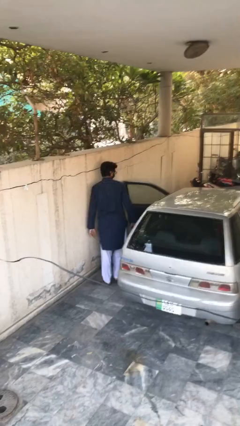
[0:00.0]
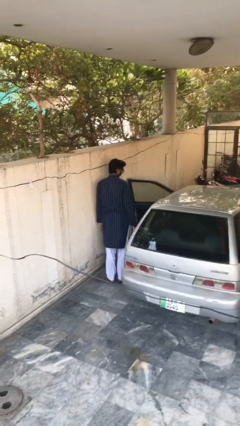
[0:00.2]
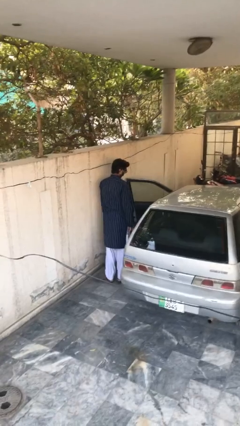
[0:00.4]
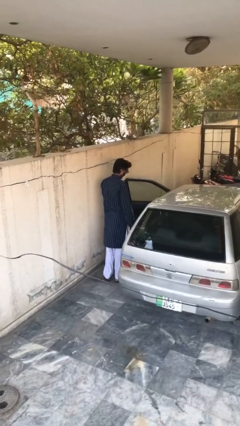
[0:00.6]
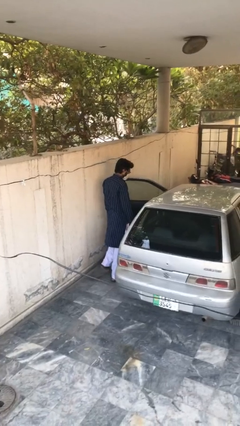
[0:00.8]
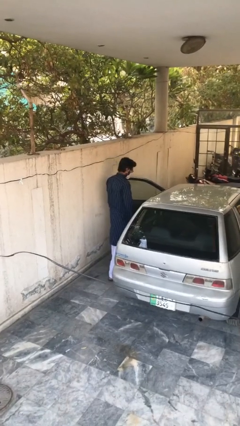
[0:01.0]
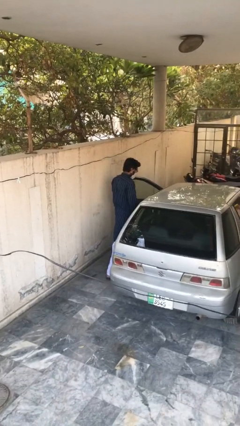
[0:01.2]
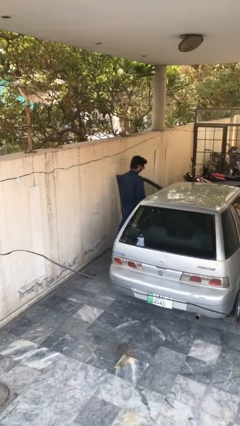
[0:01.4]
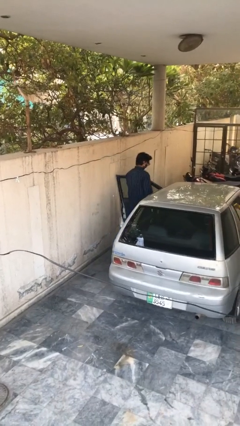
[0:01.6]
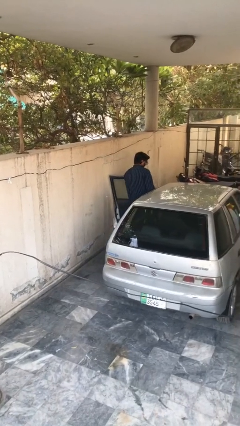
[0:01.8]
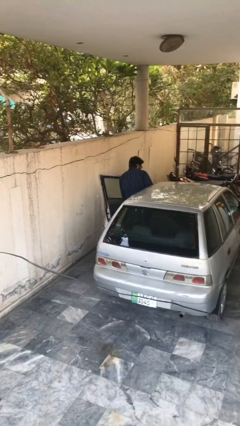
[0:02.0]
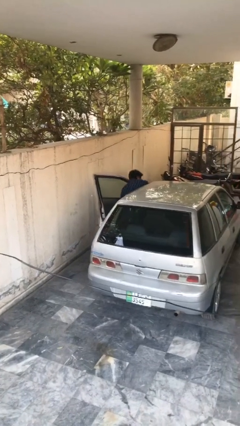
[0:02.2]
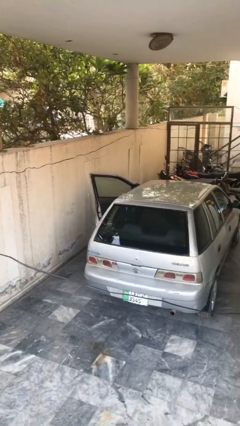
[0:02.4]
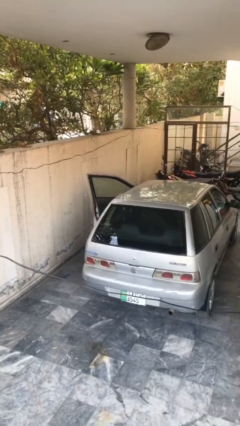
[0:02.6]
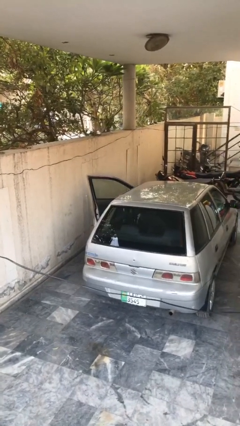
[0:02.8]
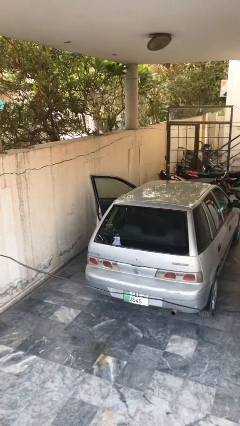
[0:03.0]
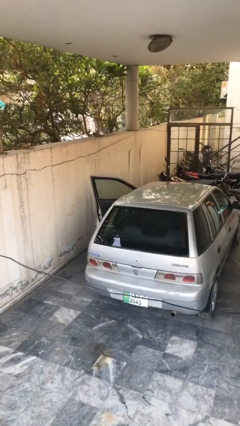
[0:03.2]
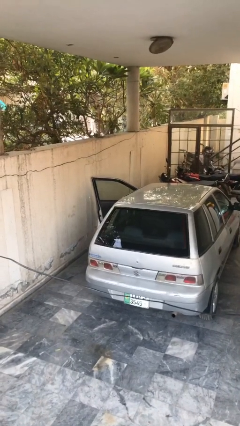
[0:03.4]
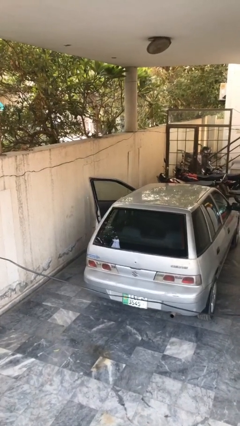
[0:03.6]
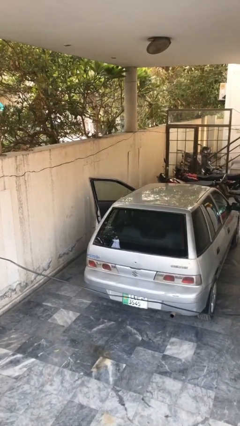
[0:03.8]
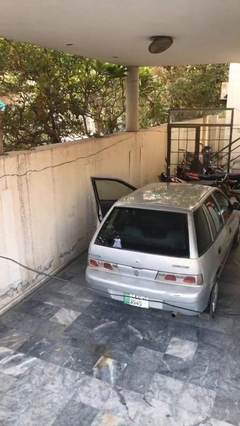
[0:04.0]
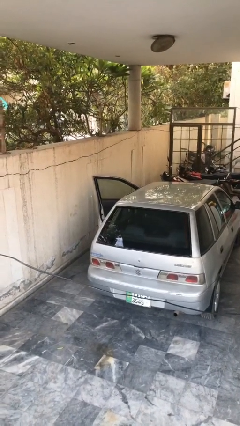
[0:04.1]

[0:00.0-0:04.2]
person enters car

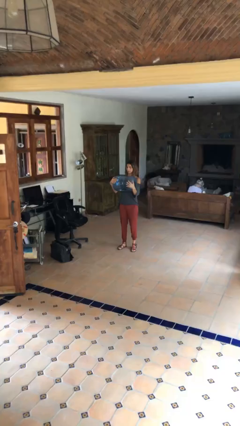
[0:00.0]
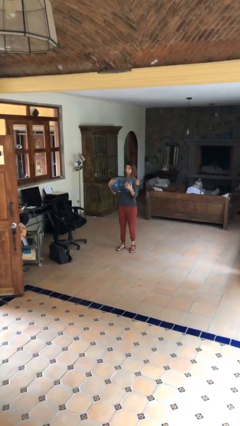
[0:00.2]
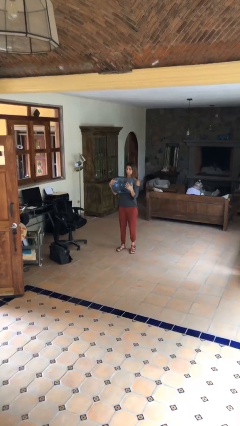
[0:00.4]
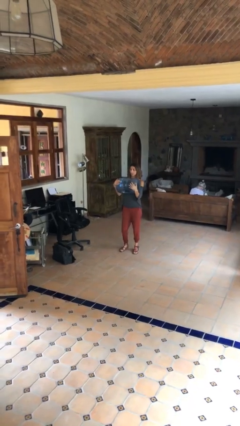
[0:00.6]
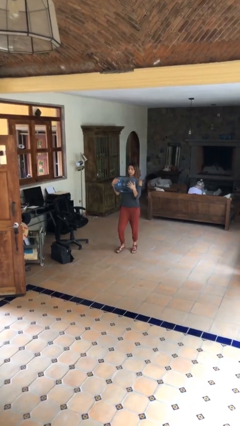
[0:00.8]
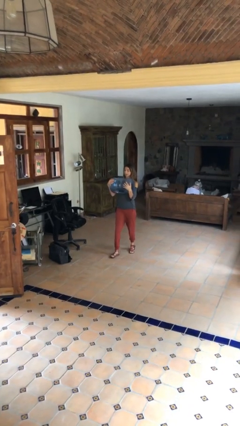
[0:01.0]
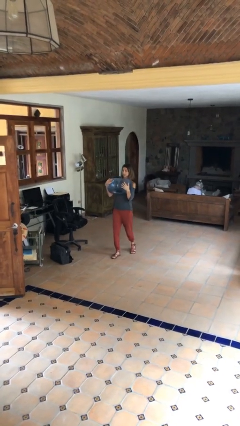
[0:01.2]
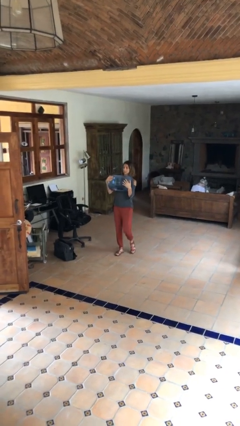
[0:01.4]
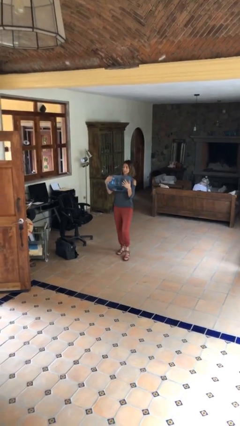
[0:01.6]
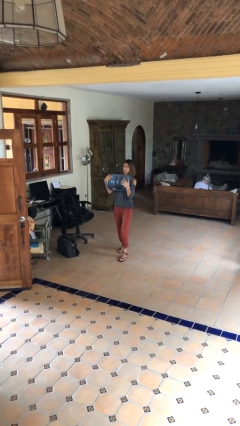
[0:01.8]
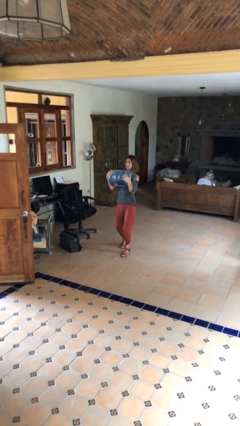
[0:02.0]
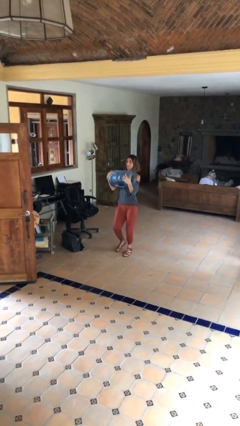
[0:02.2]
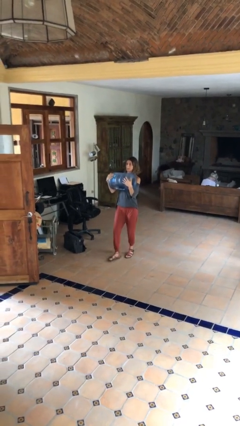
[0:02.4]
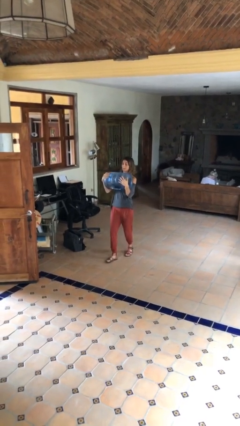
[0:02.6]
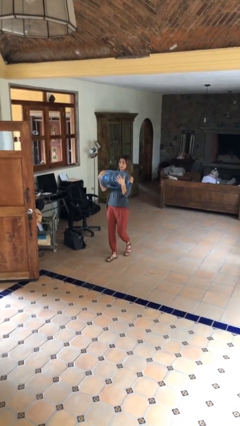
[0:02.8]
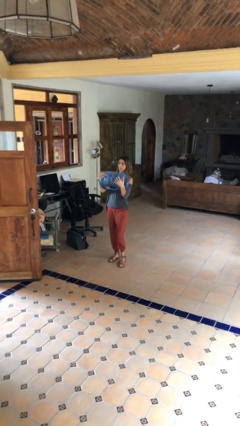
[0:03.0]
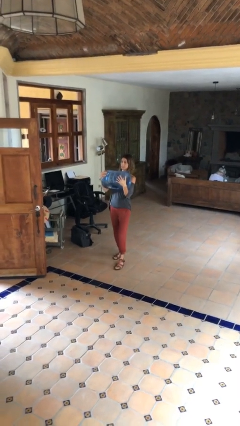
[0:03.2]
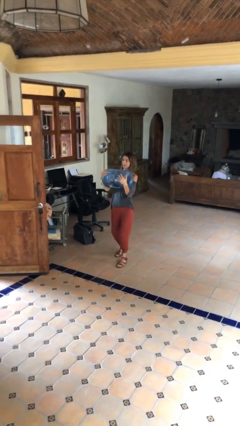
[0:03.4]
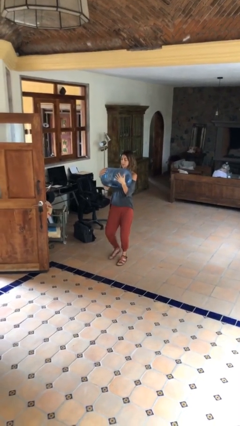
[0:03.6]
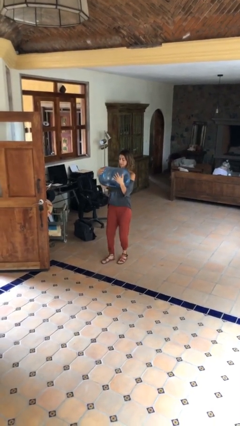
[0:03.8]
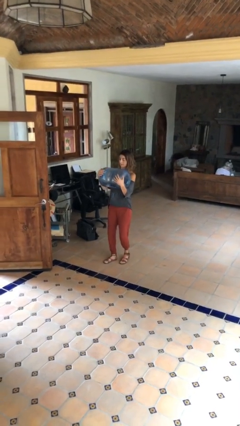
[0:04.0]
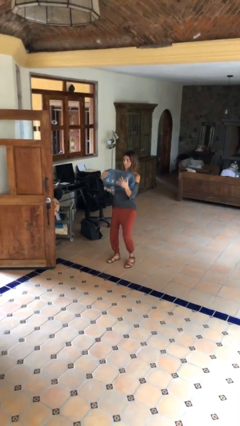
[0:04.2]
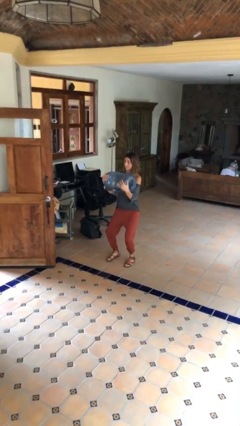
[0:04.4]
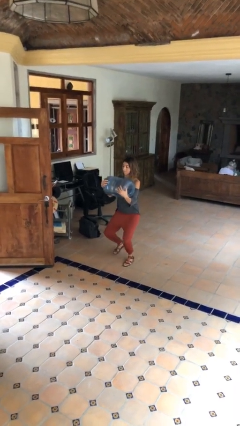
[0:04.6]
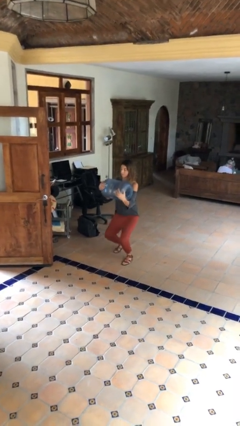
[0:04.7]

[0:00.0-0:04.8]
person carries heavy object

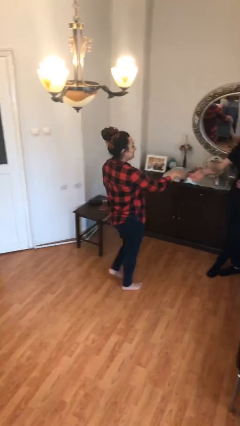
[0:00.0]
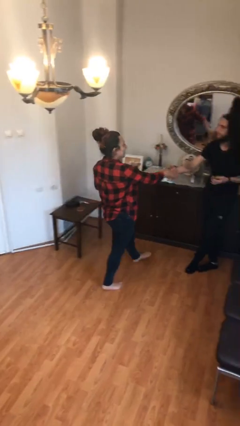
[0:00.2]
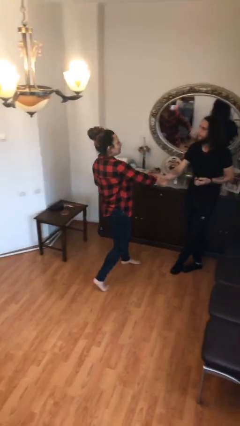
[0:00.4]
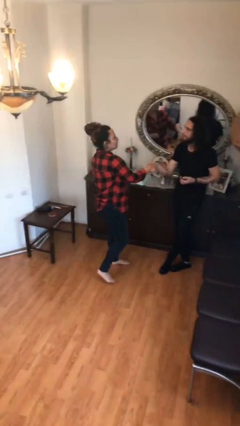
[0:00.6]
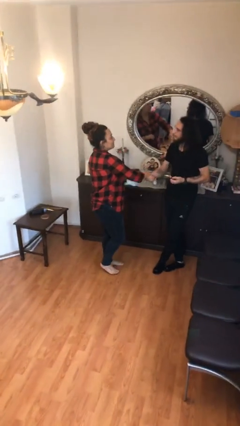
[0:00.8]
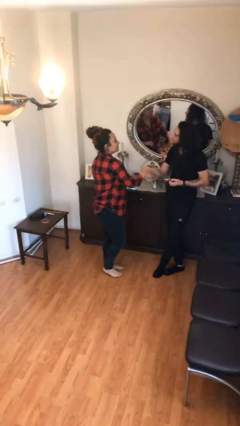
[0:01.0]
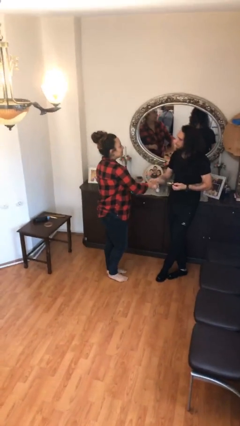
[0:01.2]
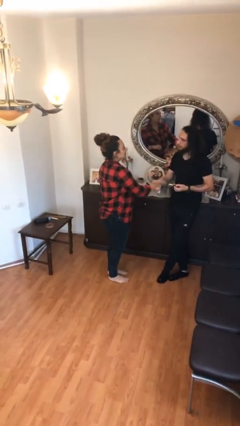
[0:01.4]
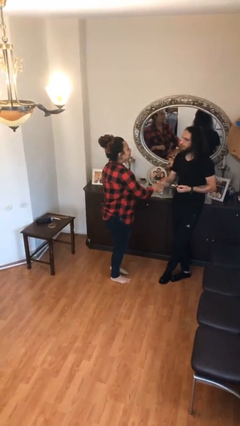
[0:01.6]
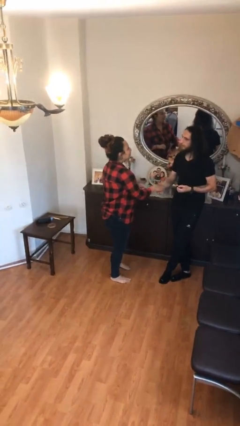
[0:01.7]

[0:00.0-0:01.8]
person shakes hand

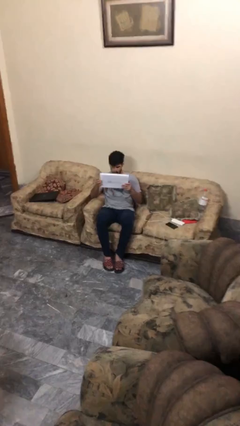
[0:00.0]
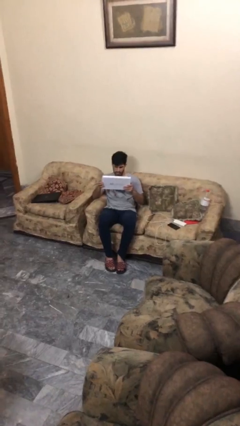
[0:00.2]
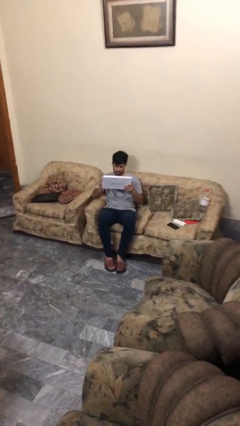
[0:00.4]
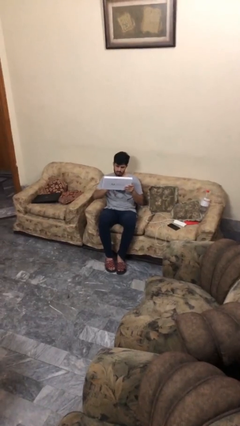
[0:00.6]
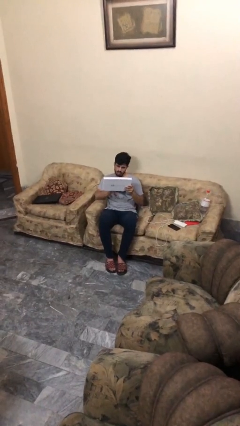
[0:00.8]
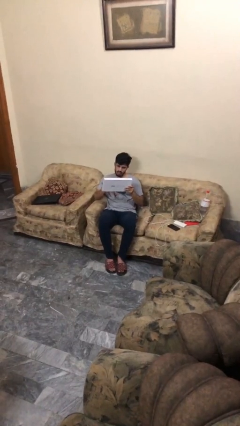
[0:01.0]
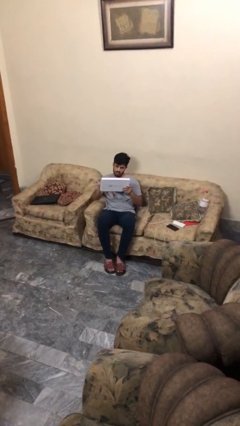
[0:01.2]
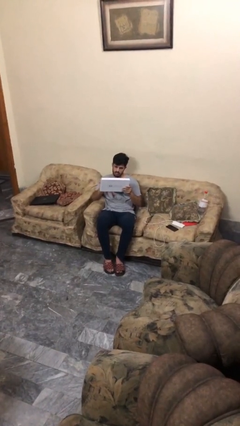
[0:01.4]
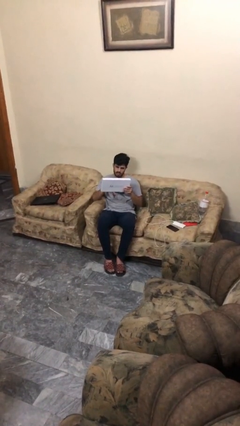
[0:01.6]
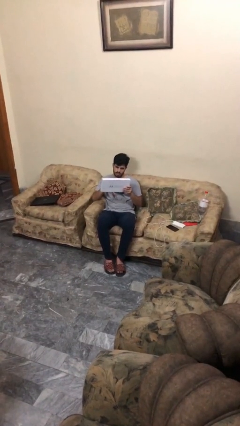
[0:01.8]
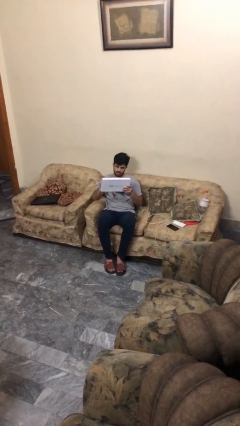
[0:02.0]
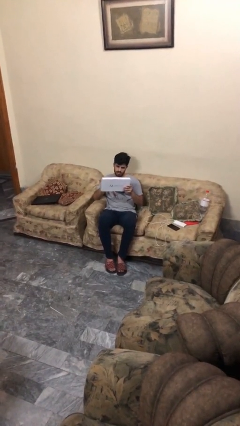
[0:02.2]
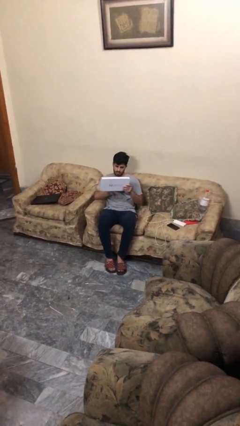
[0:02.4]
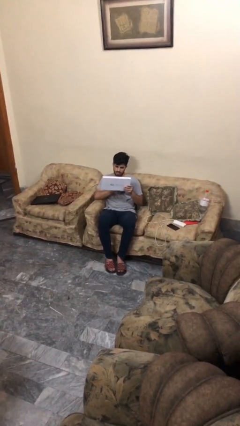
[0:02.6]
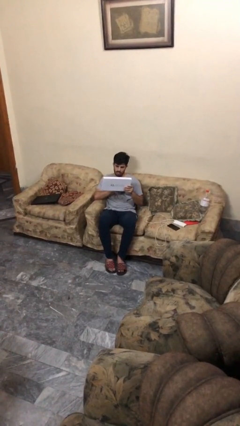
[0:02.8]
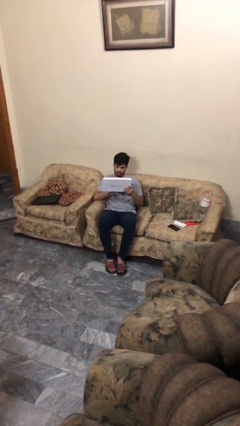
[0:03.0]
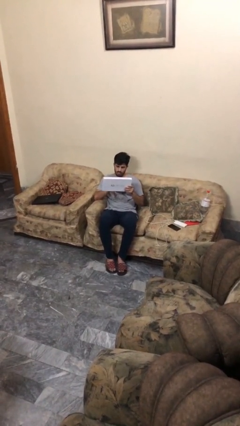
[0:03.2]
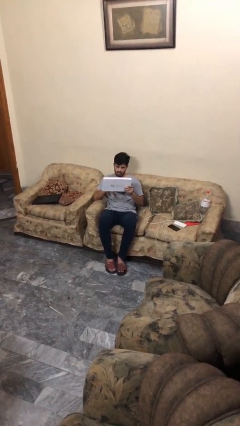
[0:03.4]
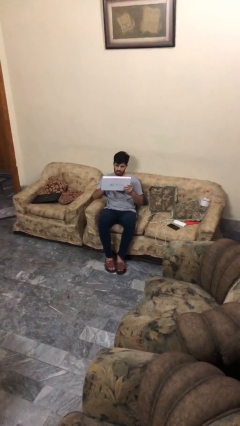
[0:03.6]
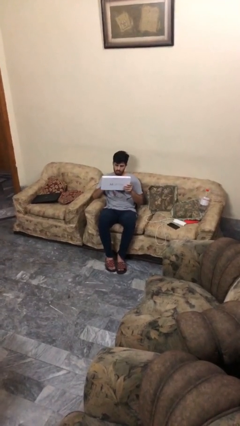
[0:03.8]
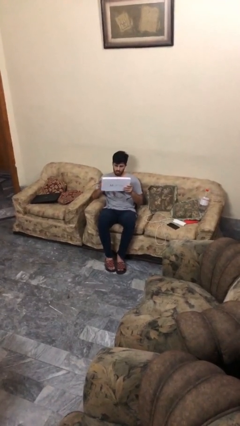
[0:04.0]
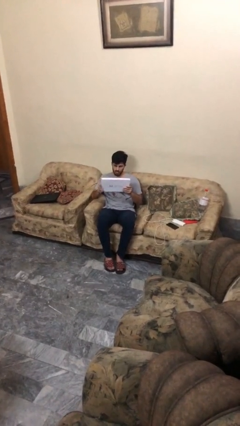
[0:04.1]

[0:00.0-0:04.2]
person interacts with tablet

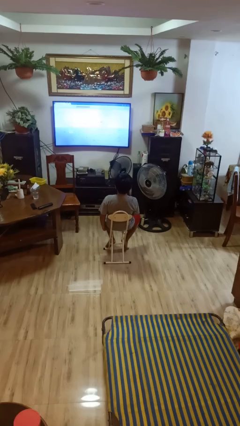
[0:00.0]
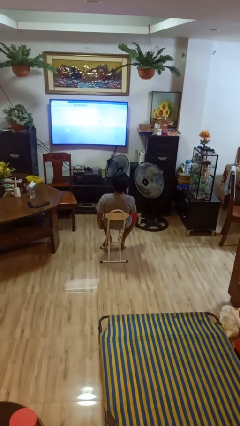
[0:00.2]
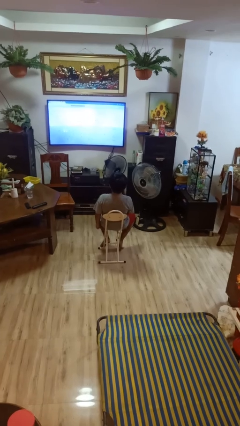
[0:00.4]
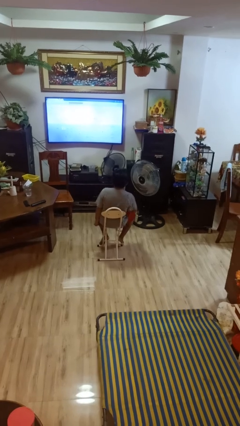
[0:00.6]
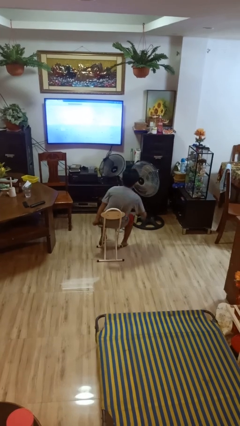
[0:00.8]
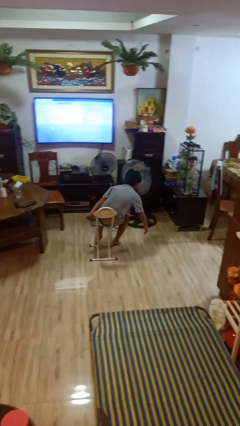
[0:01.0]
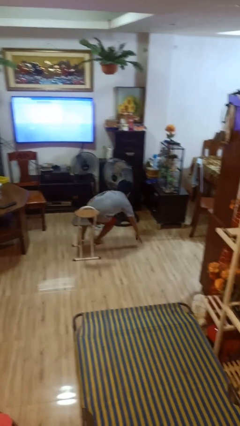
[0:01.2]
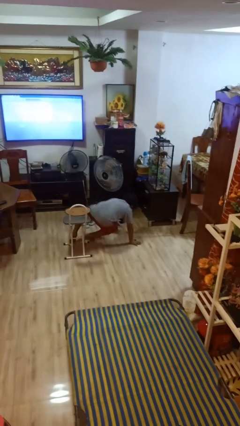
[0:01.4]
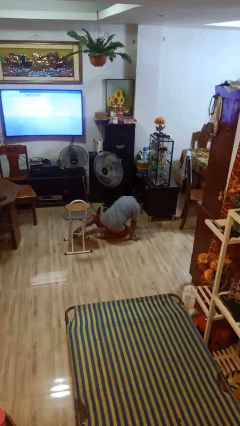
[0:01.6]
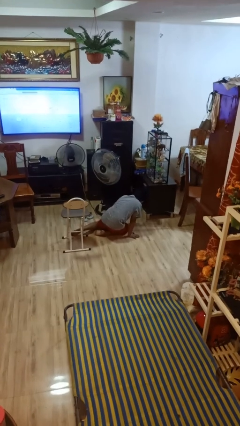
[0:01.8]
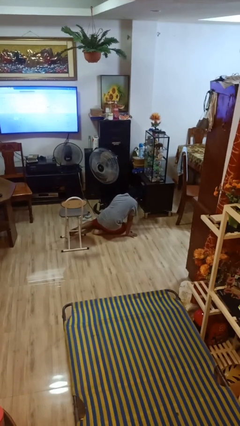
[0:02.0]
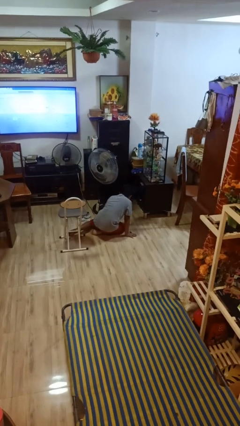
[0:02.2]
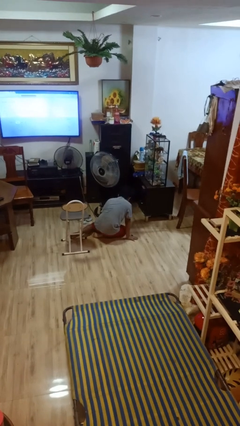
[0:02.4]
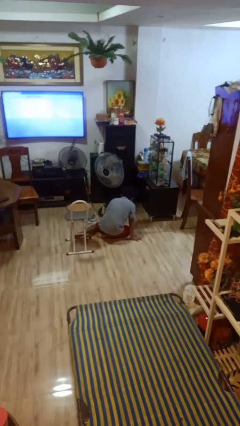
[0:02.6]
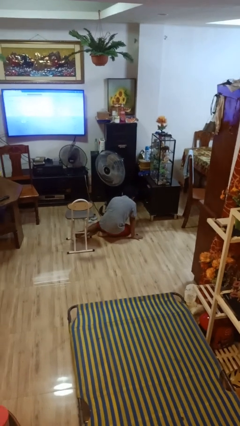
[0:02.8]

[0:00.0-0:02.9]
person falls from chair
